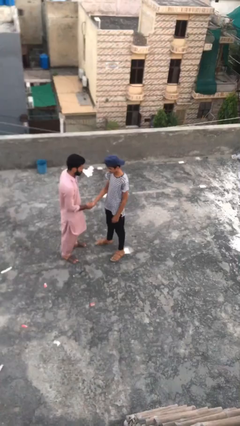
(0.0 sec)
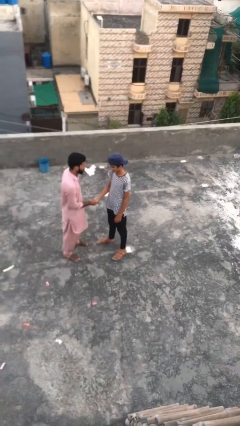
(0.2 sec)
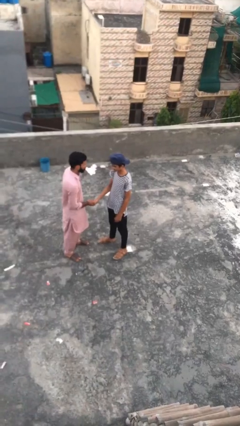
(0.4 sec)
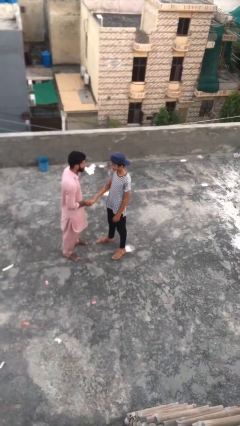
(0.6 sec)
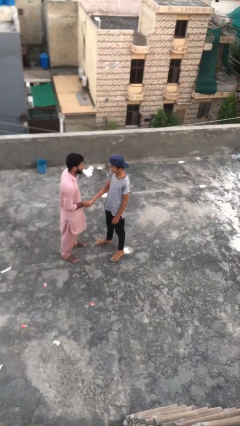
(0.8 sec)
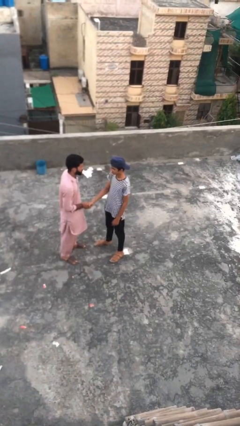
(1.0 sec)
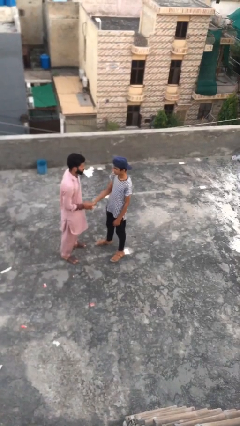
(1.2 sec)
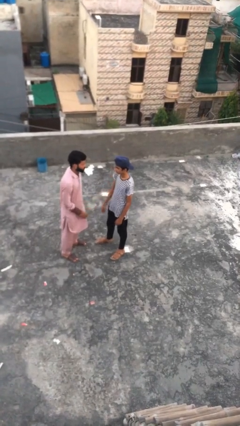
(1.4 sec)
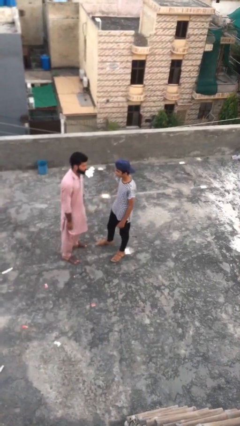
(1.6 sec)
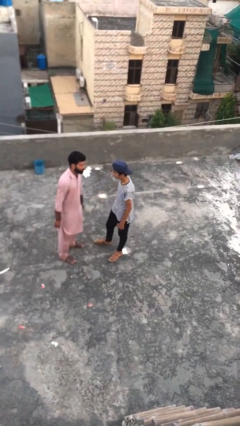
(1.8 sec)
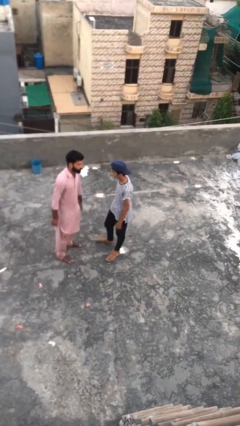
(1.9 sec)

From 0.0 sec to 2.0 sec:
person shakes hand

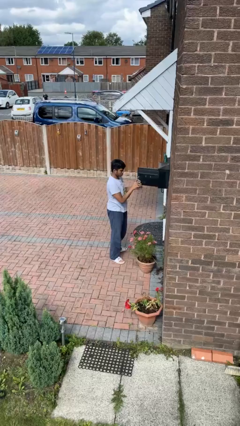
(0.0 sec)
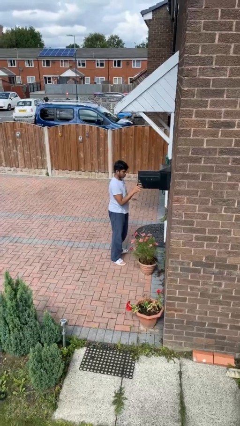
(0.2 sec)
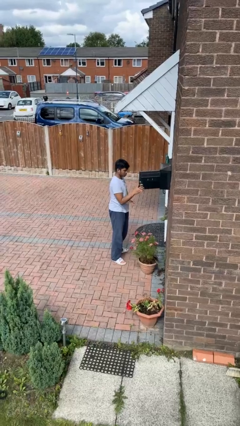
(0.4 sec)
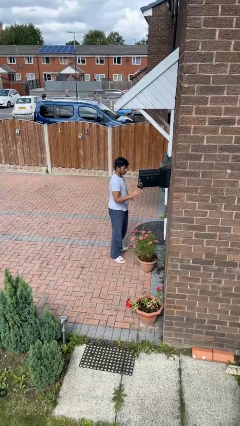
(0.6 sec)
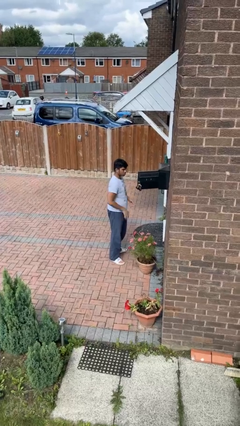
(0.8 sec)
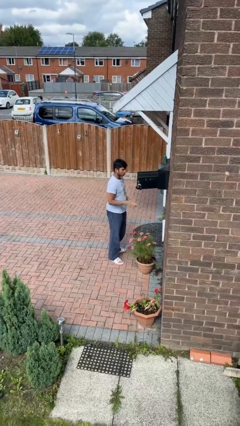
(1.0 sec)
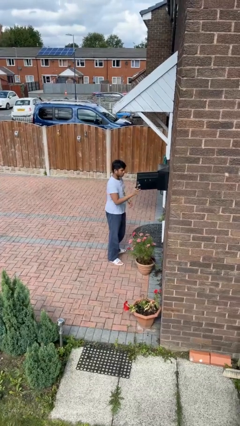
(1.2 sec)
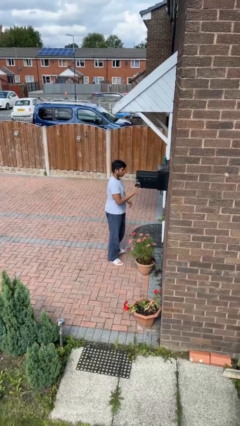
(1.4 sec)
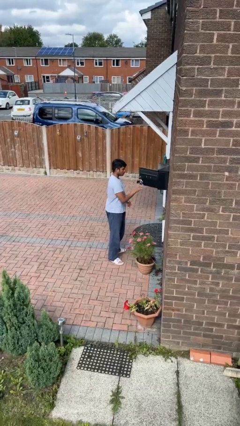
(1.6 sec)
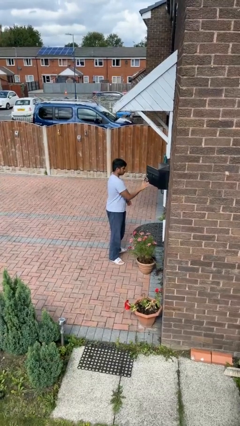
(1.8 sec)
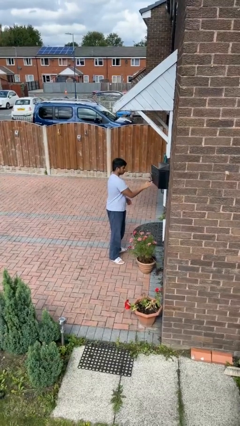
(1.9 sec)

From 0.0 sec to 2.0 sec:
person closes mailbox

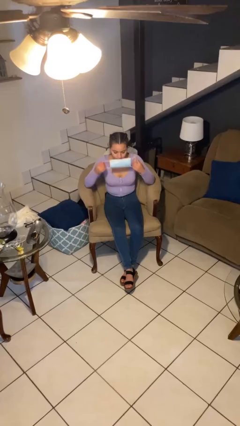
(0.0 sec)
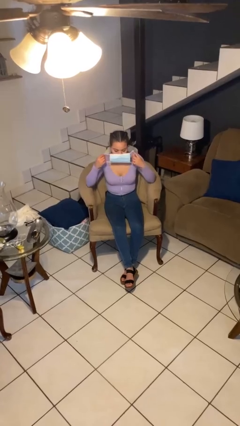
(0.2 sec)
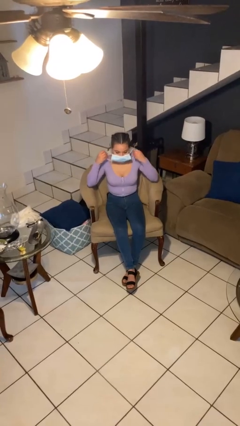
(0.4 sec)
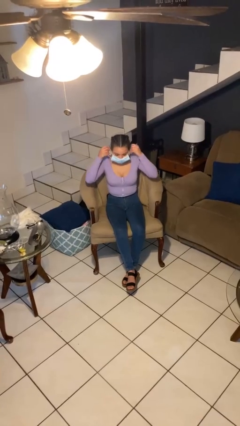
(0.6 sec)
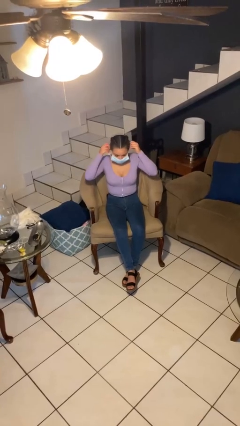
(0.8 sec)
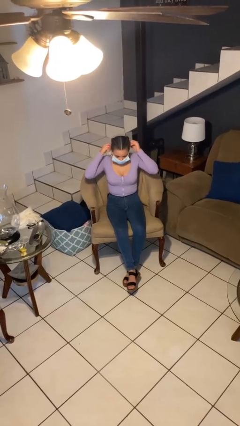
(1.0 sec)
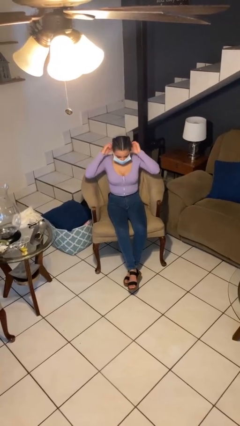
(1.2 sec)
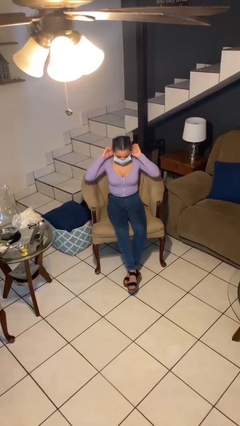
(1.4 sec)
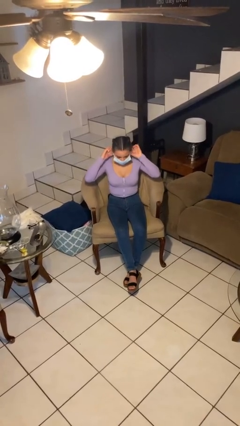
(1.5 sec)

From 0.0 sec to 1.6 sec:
person puts on facemask

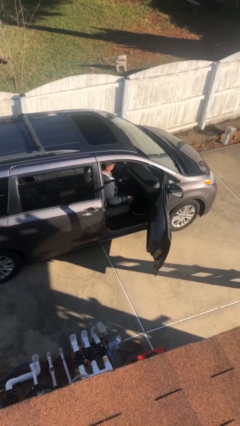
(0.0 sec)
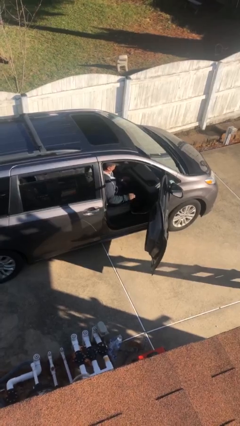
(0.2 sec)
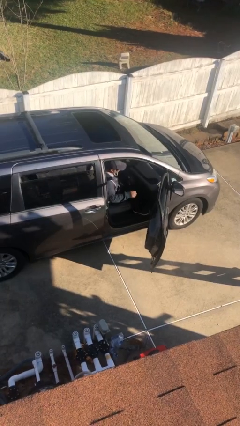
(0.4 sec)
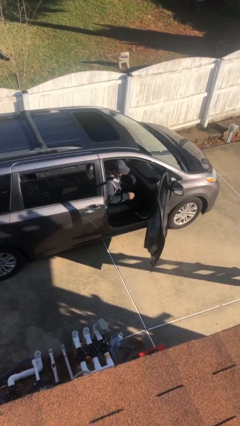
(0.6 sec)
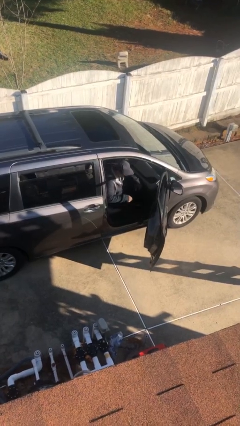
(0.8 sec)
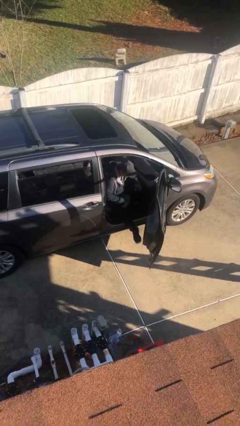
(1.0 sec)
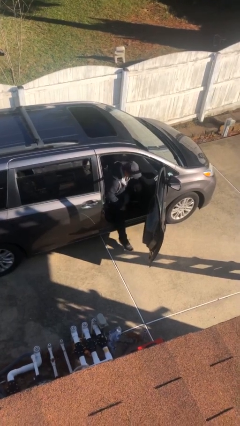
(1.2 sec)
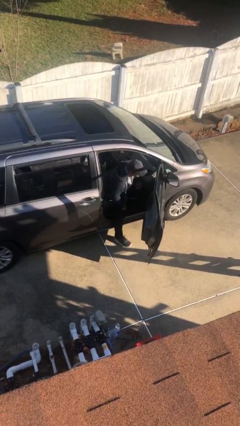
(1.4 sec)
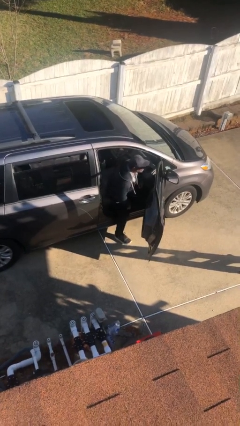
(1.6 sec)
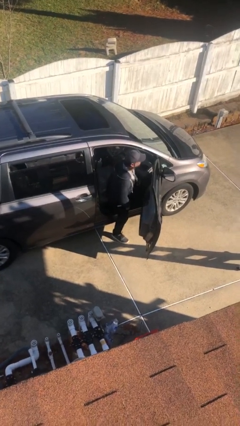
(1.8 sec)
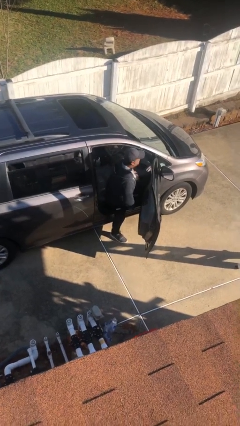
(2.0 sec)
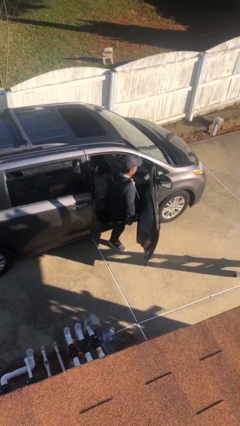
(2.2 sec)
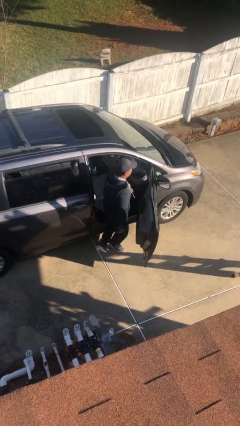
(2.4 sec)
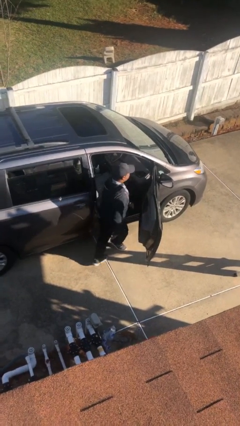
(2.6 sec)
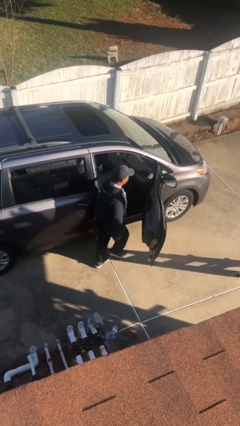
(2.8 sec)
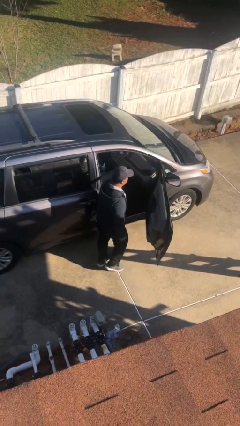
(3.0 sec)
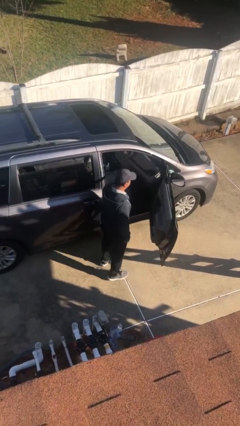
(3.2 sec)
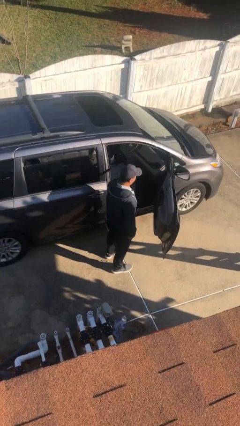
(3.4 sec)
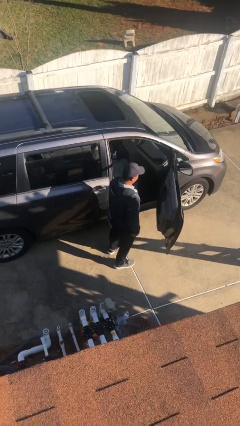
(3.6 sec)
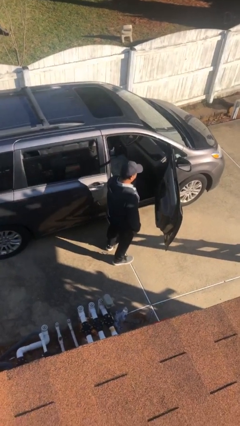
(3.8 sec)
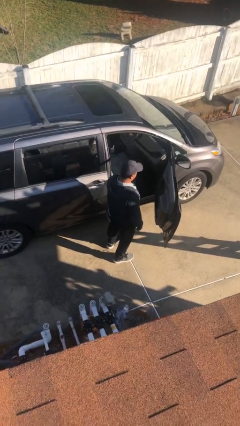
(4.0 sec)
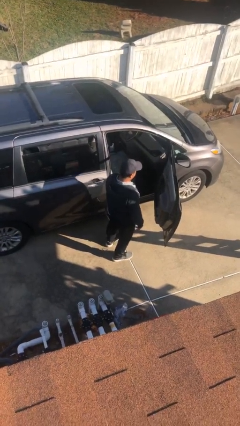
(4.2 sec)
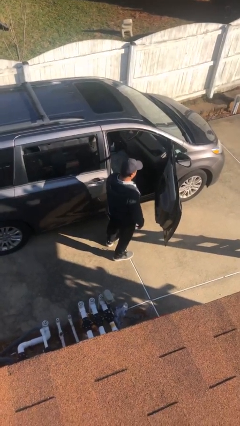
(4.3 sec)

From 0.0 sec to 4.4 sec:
person exits car

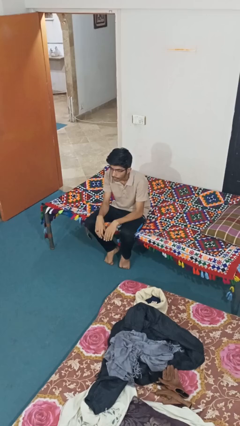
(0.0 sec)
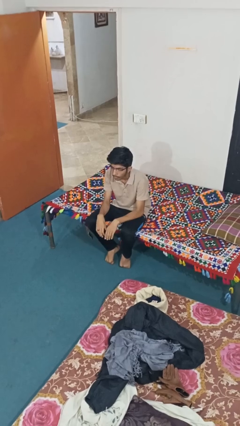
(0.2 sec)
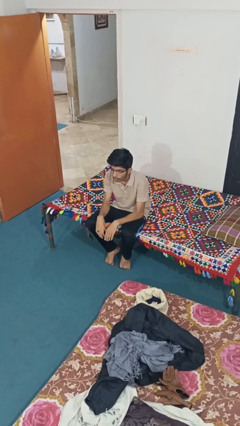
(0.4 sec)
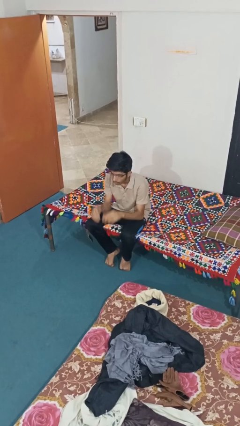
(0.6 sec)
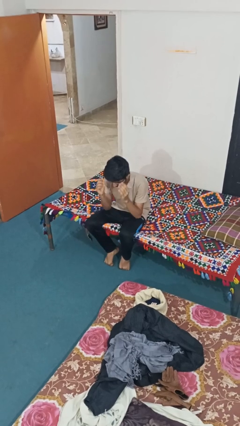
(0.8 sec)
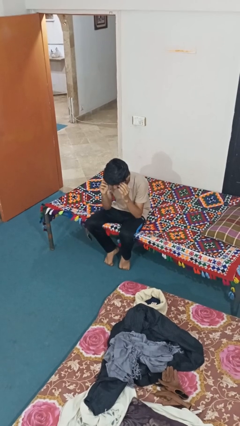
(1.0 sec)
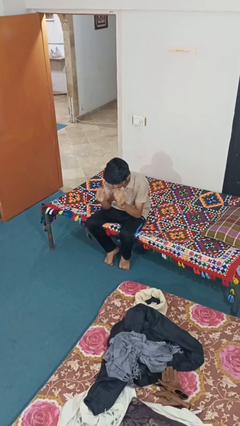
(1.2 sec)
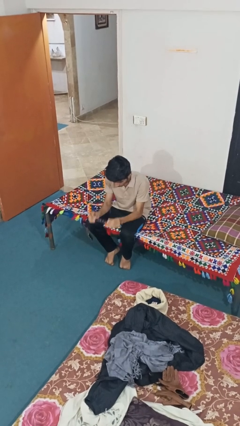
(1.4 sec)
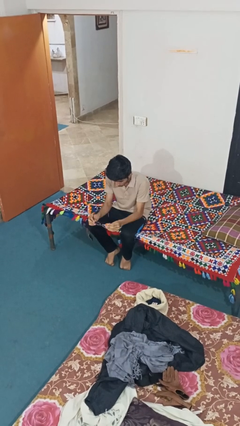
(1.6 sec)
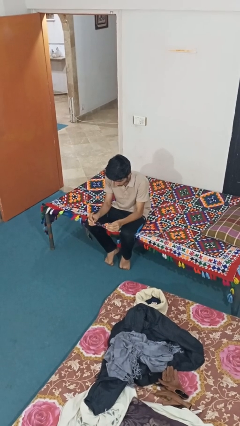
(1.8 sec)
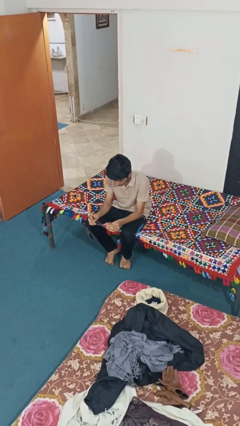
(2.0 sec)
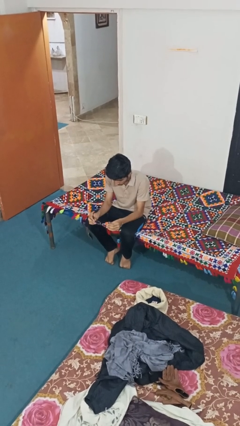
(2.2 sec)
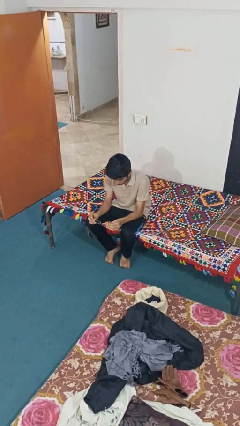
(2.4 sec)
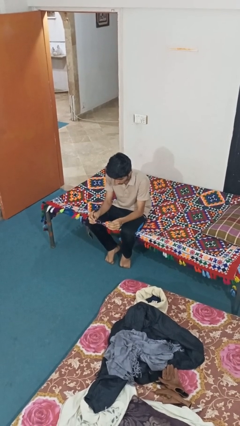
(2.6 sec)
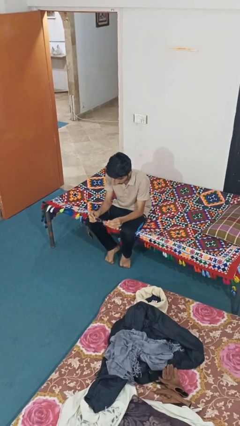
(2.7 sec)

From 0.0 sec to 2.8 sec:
person takes off glasses

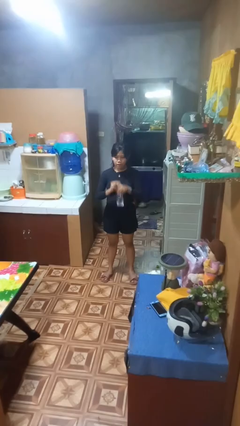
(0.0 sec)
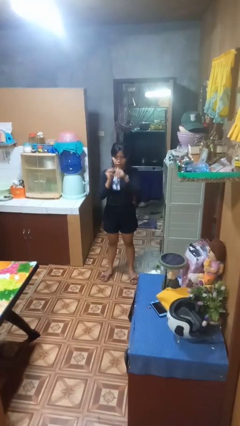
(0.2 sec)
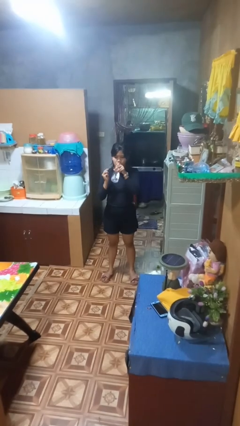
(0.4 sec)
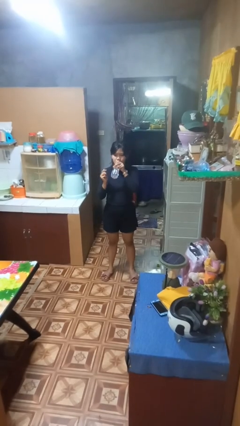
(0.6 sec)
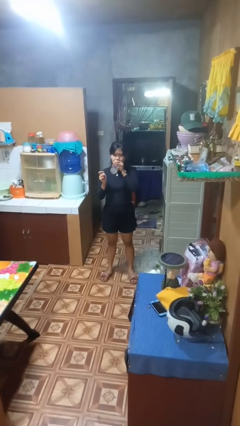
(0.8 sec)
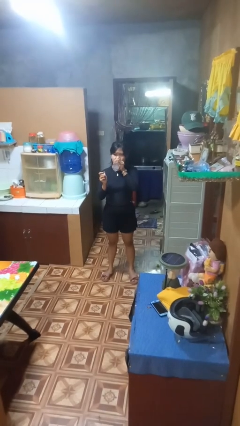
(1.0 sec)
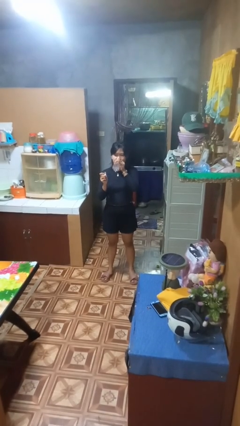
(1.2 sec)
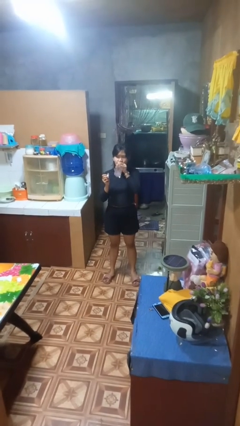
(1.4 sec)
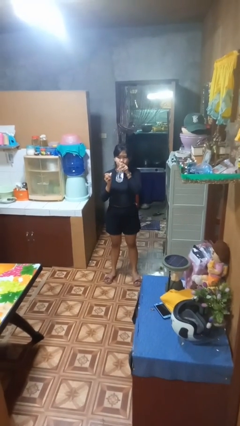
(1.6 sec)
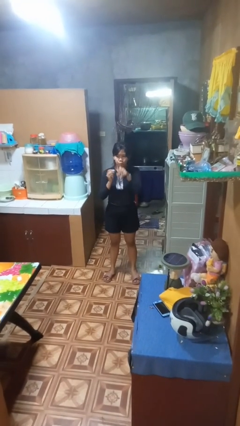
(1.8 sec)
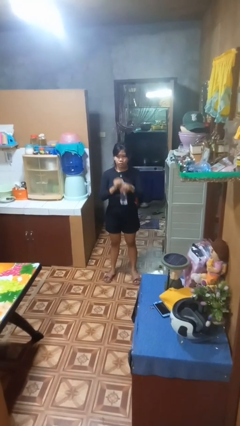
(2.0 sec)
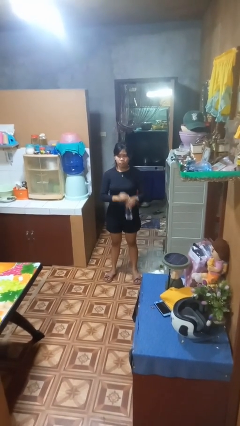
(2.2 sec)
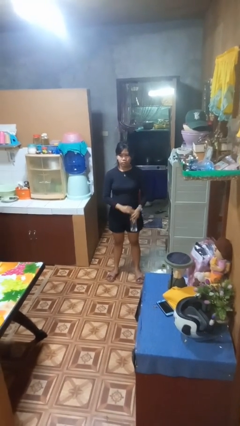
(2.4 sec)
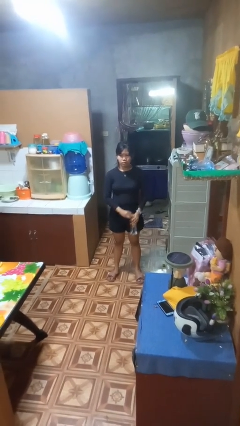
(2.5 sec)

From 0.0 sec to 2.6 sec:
person drinks from bottle

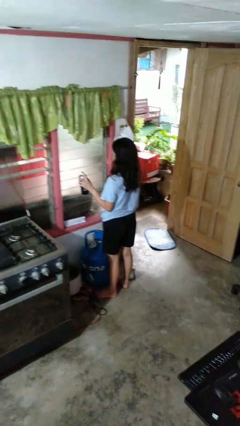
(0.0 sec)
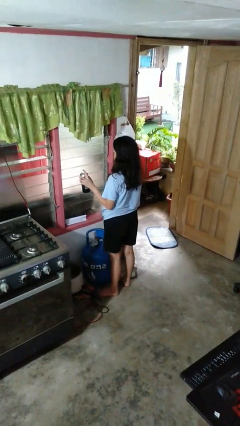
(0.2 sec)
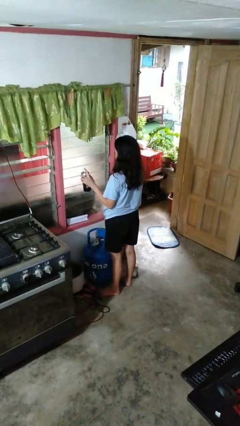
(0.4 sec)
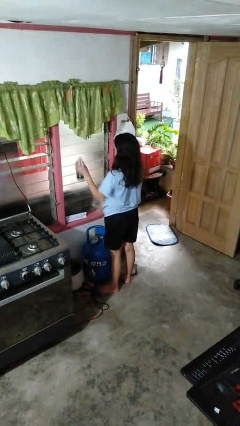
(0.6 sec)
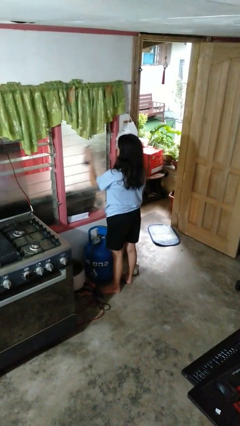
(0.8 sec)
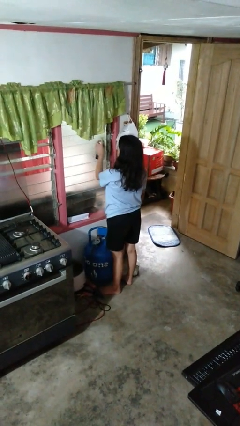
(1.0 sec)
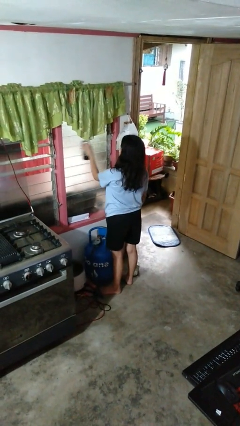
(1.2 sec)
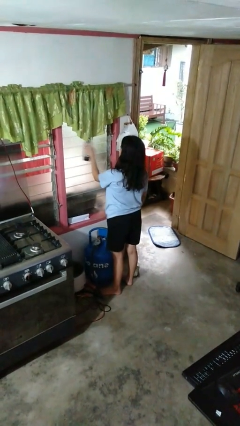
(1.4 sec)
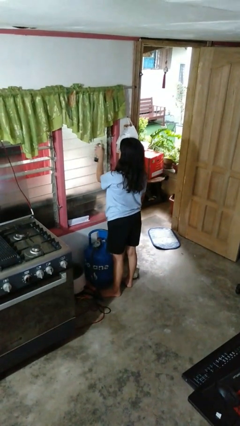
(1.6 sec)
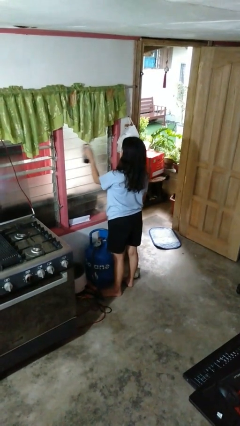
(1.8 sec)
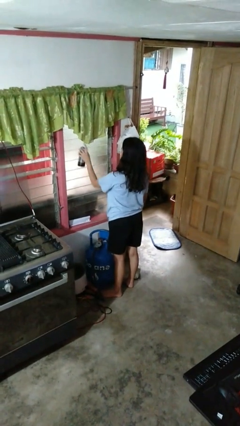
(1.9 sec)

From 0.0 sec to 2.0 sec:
person sprays from bottle
